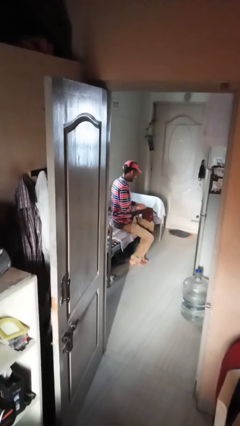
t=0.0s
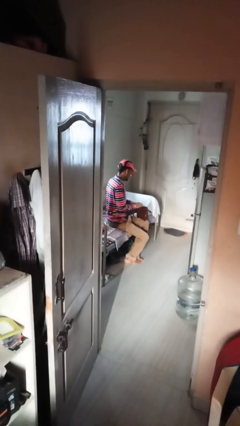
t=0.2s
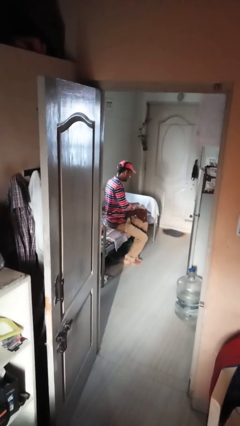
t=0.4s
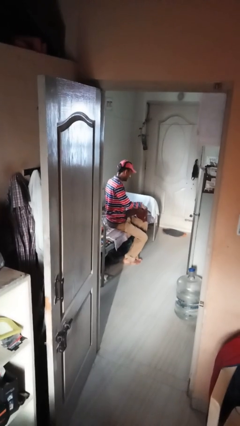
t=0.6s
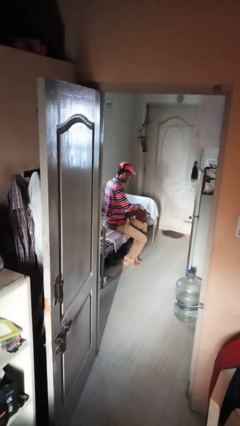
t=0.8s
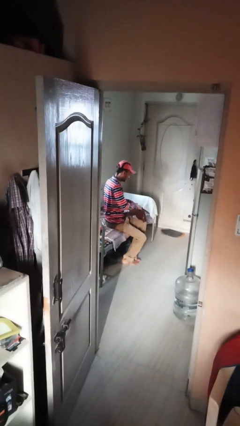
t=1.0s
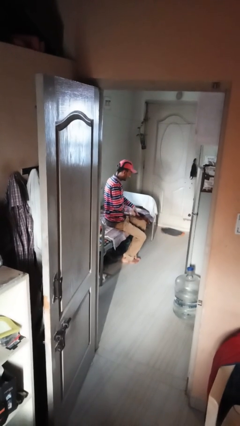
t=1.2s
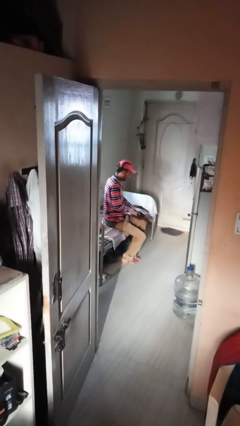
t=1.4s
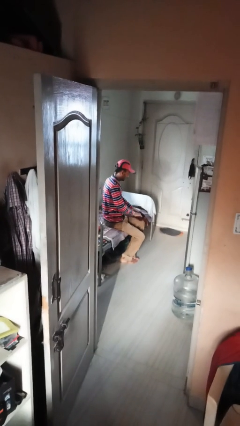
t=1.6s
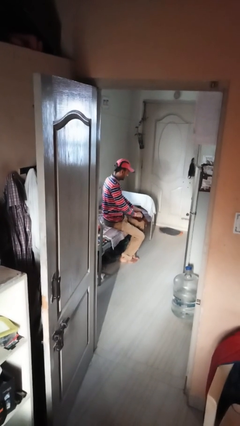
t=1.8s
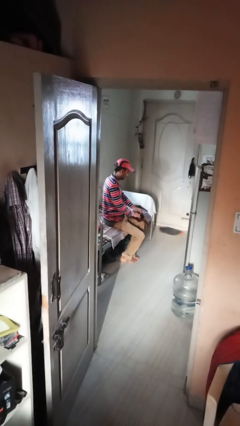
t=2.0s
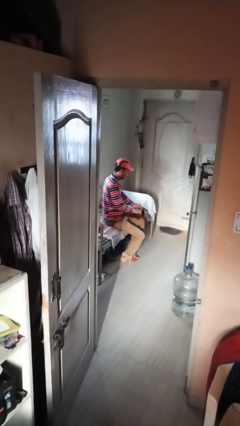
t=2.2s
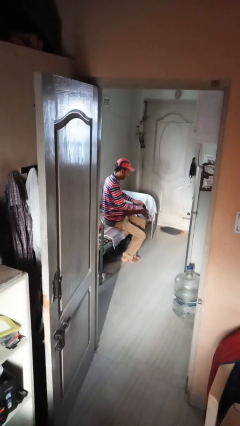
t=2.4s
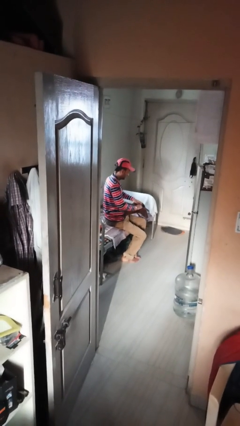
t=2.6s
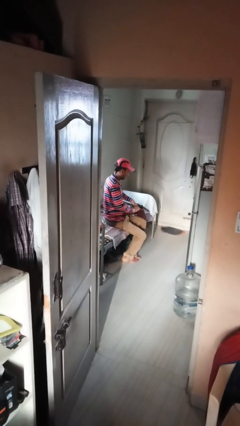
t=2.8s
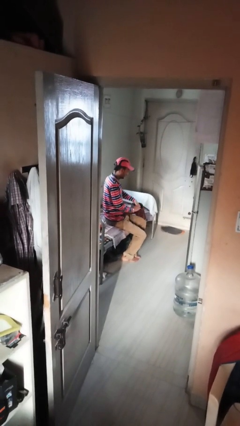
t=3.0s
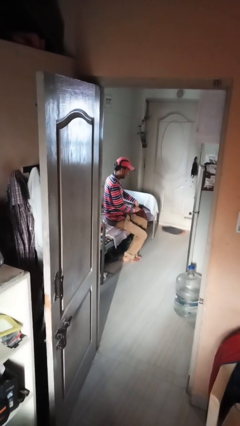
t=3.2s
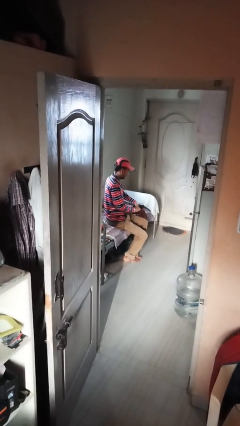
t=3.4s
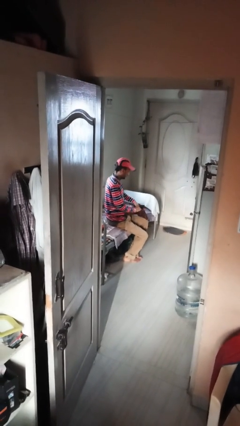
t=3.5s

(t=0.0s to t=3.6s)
person searches in purse

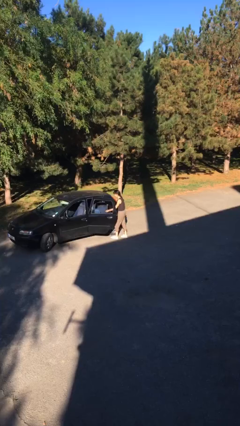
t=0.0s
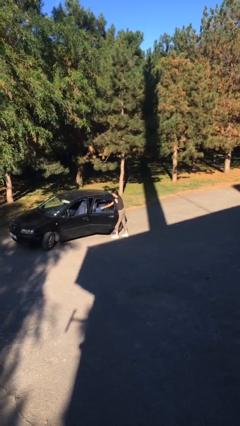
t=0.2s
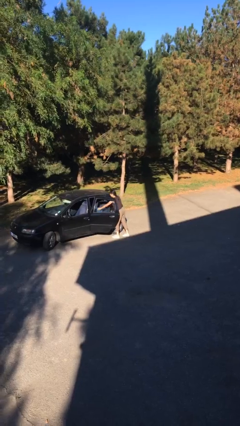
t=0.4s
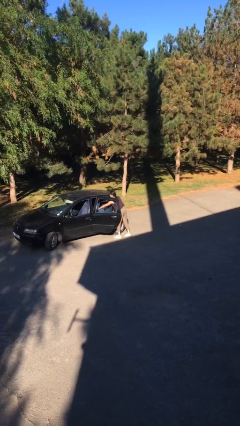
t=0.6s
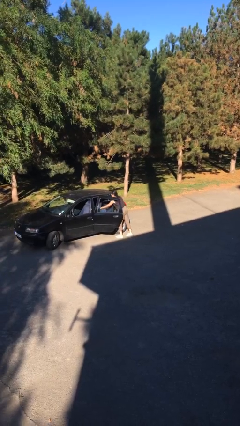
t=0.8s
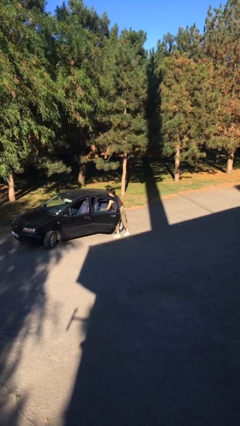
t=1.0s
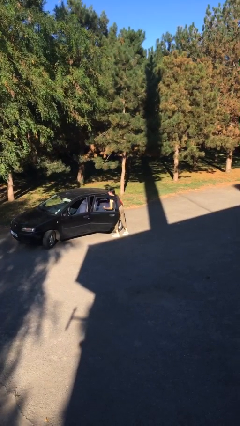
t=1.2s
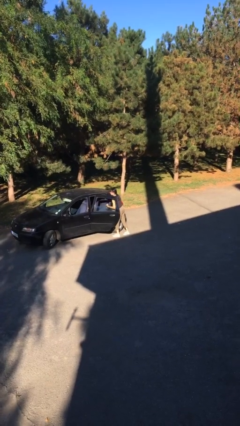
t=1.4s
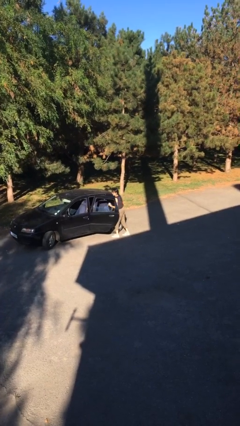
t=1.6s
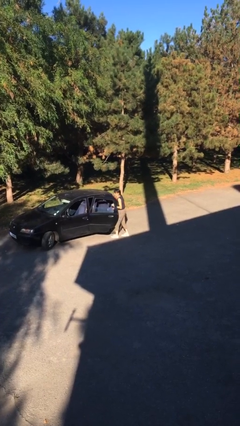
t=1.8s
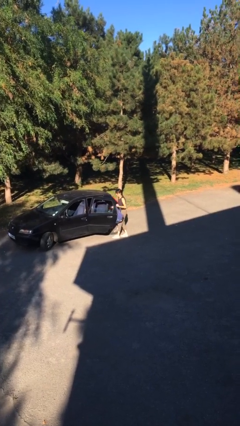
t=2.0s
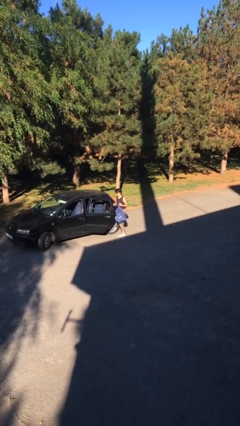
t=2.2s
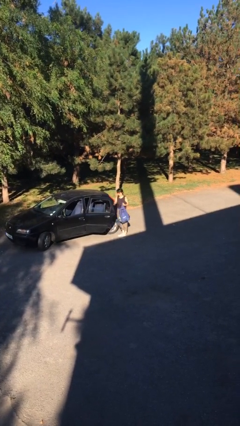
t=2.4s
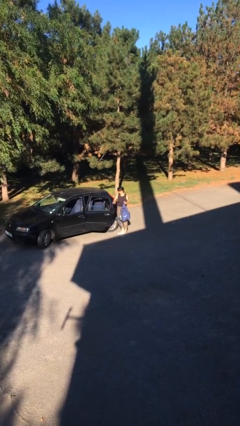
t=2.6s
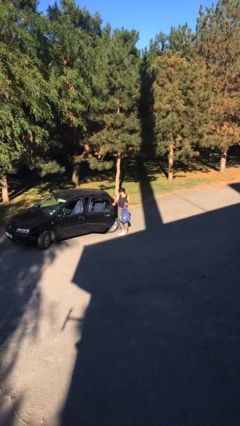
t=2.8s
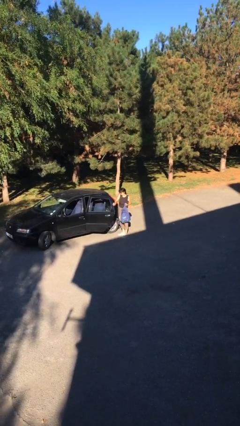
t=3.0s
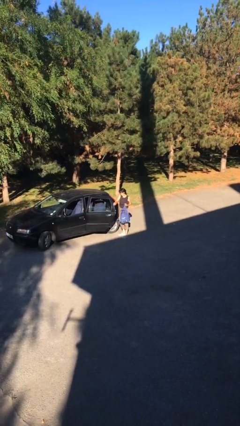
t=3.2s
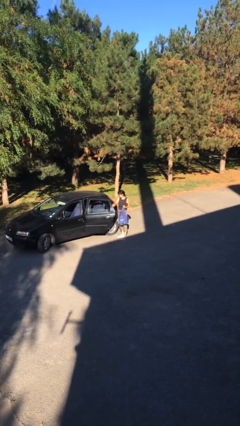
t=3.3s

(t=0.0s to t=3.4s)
person unloads car

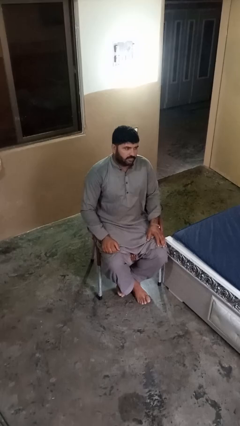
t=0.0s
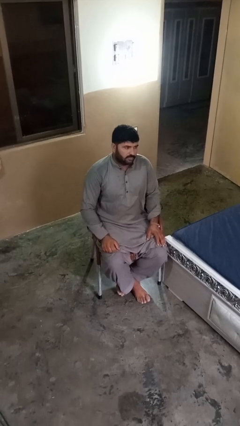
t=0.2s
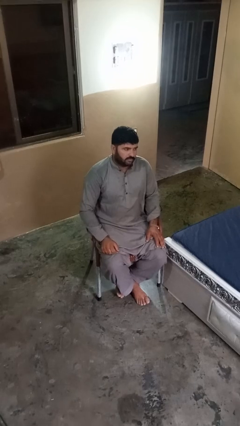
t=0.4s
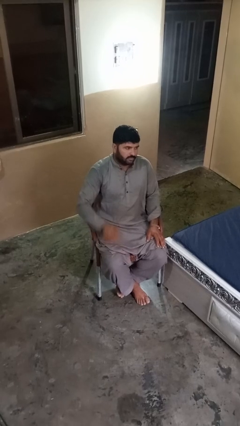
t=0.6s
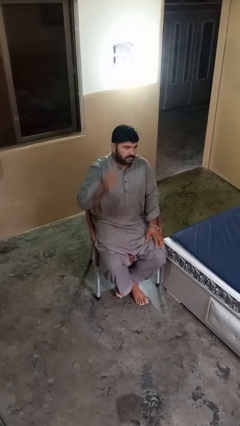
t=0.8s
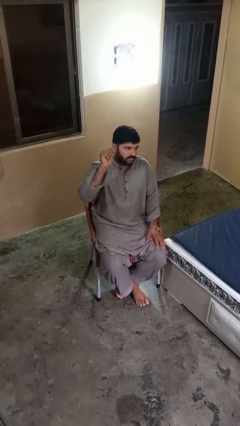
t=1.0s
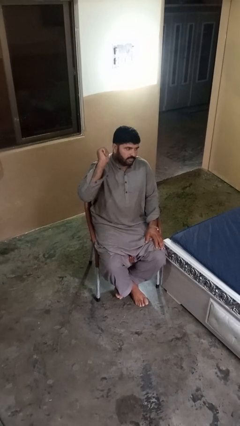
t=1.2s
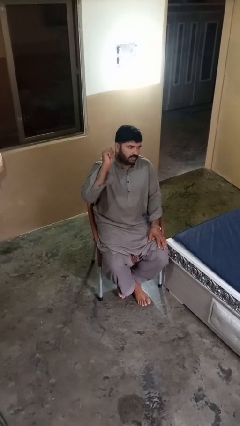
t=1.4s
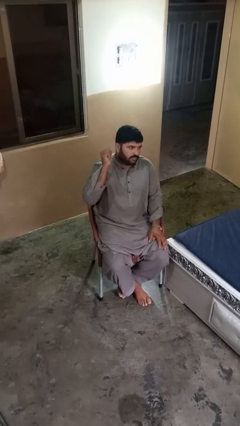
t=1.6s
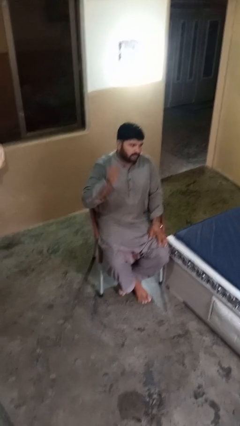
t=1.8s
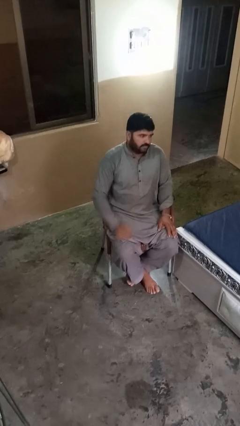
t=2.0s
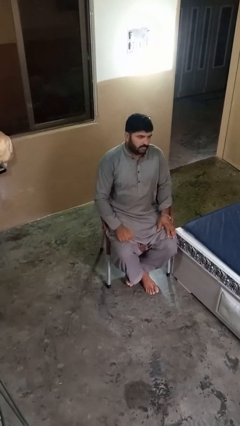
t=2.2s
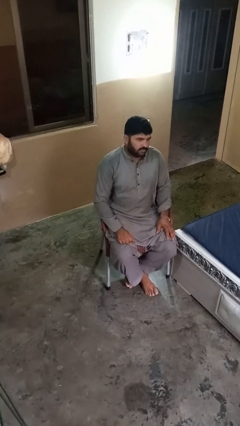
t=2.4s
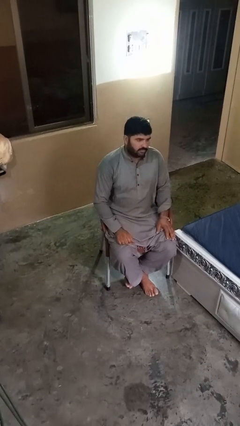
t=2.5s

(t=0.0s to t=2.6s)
person gestures behind me

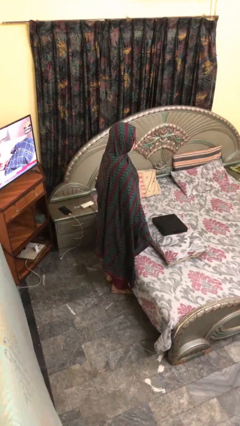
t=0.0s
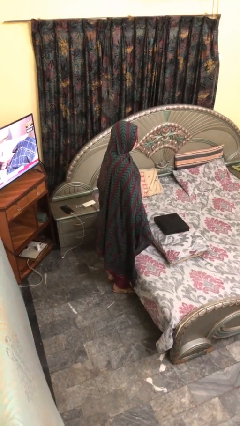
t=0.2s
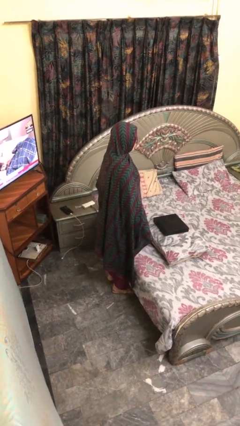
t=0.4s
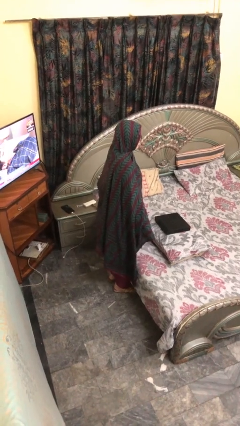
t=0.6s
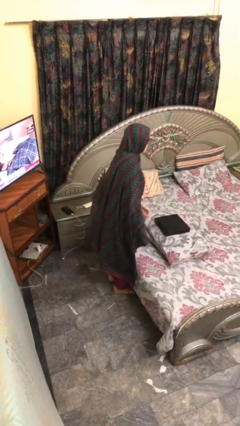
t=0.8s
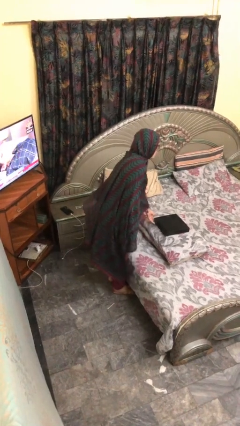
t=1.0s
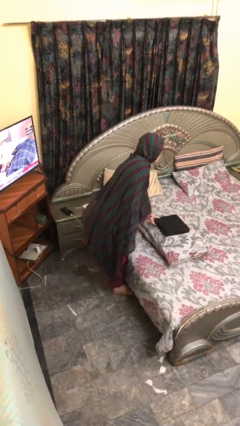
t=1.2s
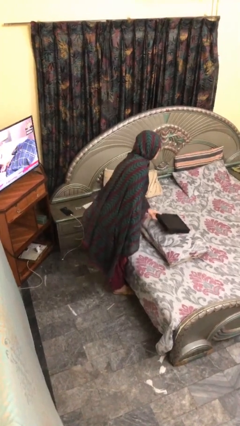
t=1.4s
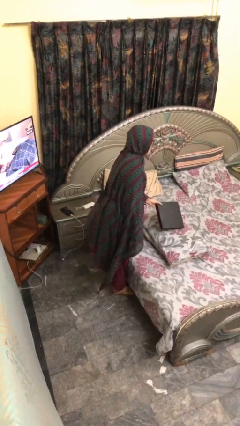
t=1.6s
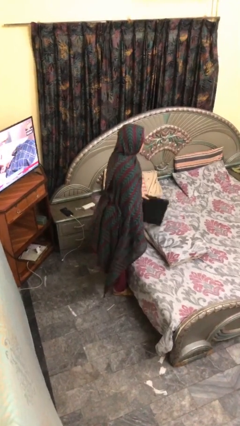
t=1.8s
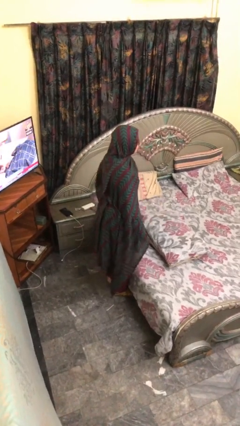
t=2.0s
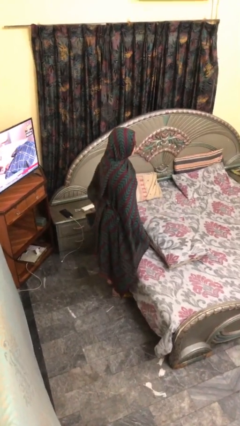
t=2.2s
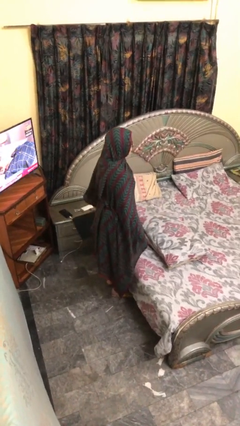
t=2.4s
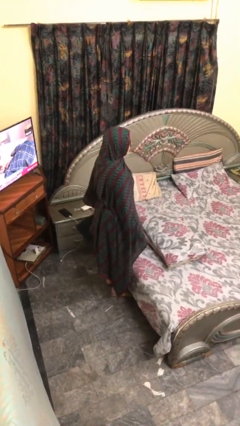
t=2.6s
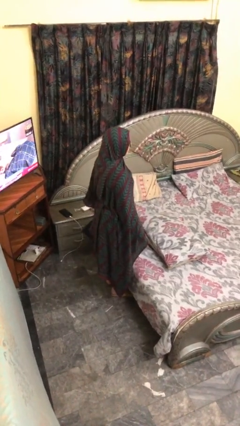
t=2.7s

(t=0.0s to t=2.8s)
person picks up object from bed

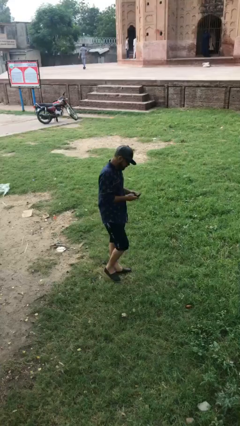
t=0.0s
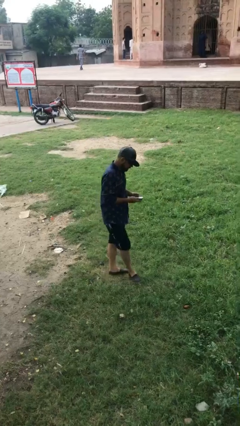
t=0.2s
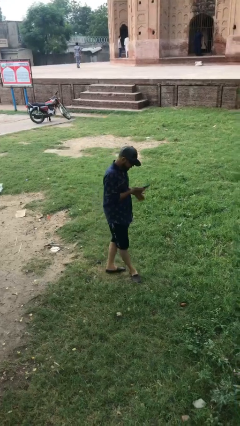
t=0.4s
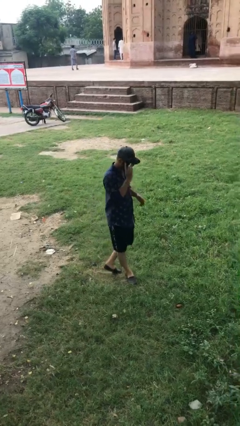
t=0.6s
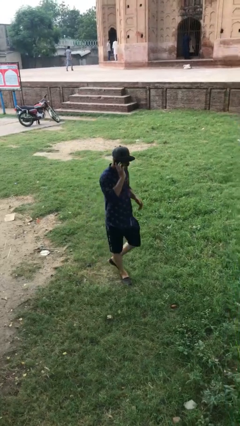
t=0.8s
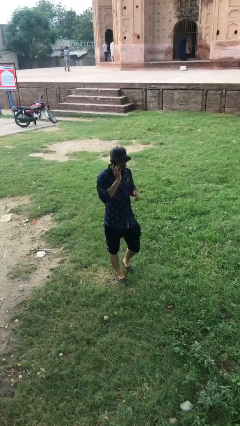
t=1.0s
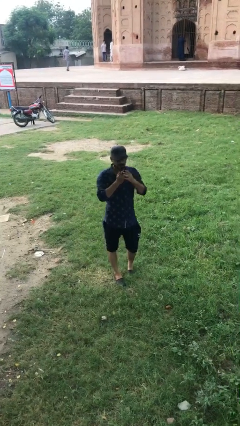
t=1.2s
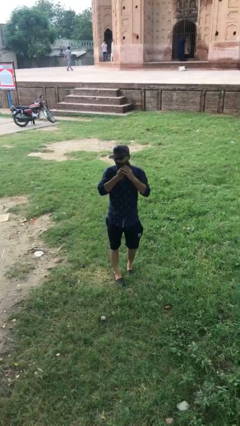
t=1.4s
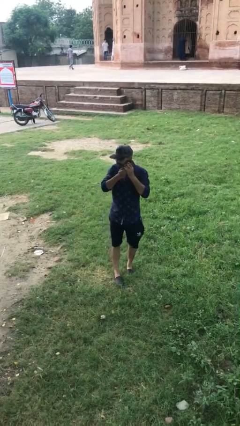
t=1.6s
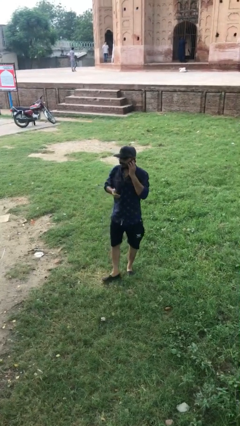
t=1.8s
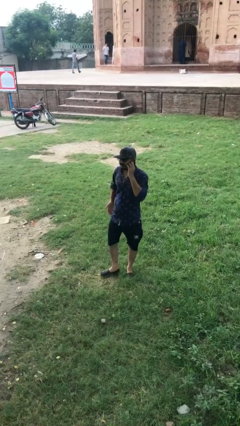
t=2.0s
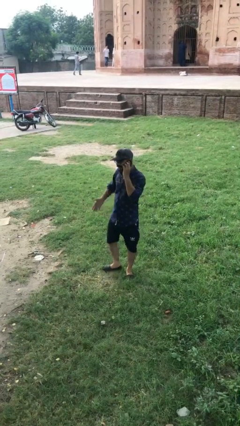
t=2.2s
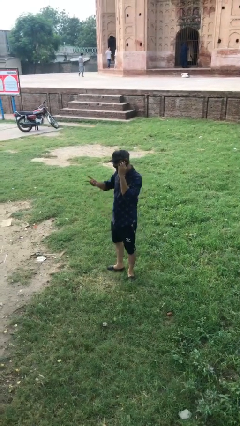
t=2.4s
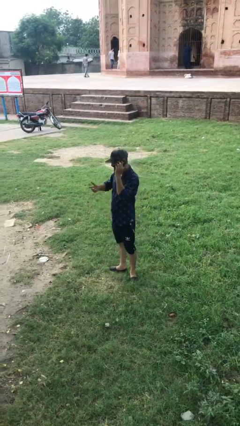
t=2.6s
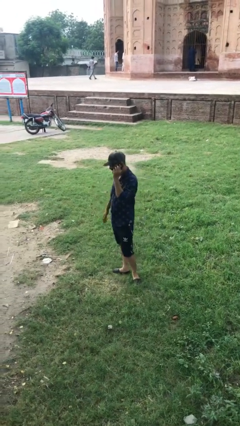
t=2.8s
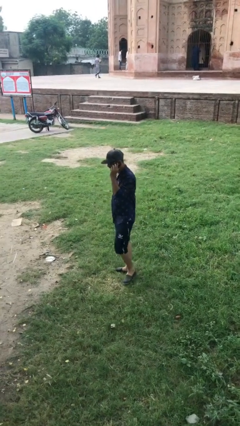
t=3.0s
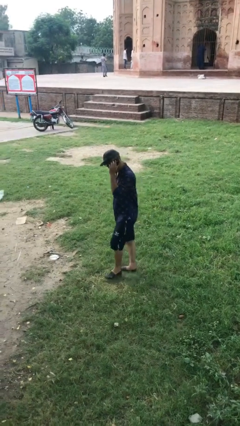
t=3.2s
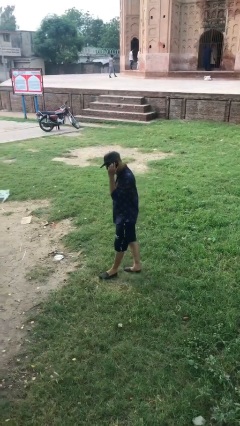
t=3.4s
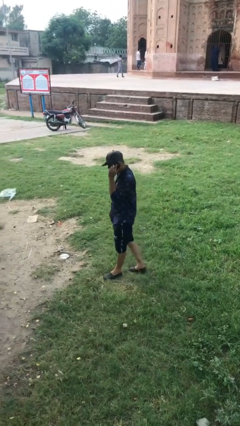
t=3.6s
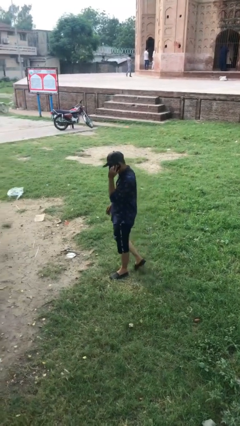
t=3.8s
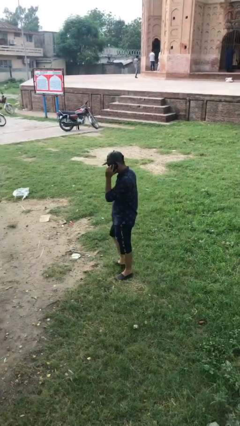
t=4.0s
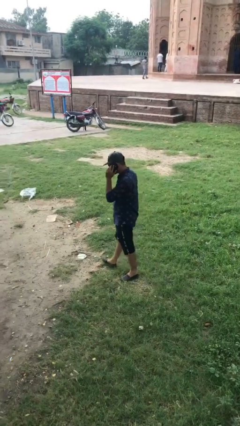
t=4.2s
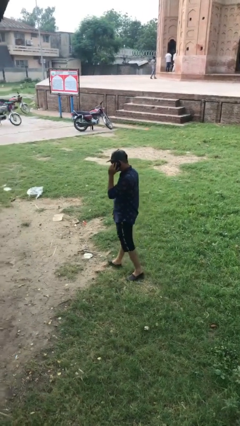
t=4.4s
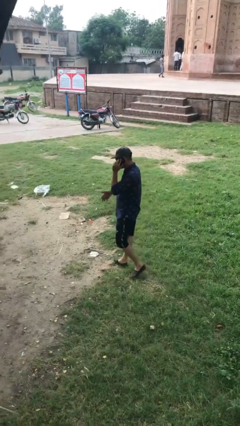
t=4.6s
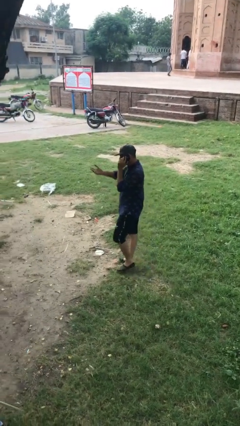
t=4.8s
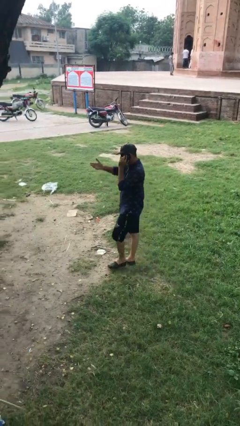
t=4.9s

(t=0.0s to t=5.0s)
person talks on phone

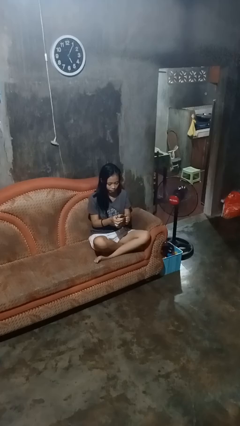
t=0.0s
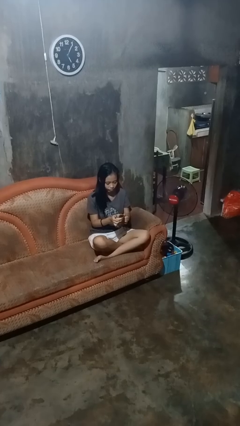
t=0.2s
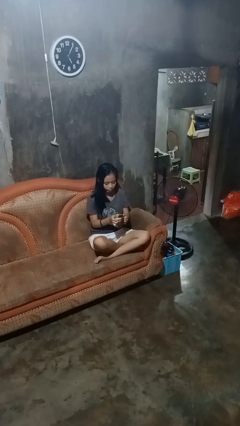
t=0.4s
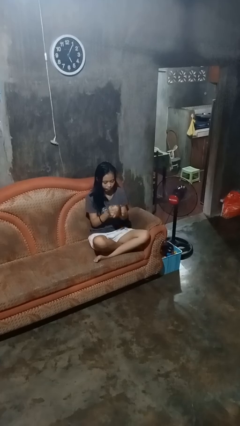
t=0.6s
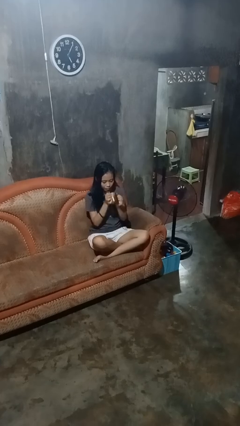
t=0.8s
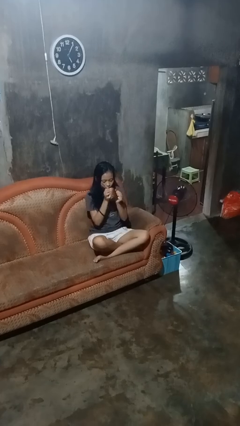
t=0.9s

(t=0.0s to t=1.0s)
person drinks from mug
